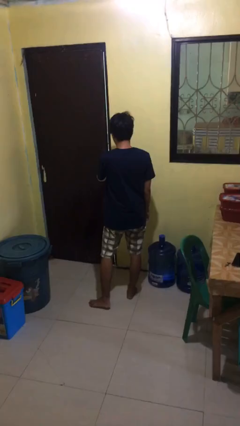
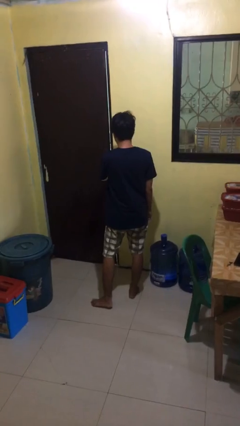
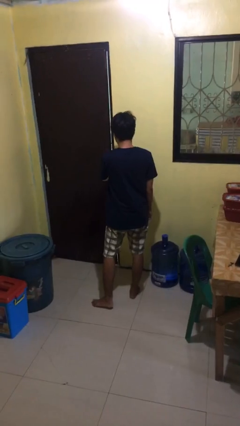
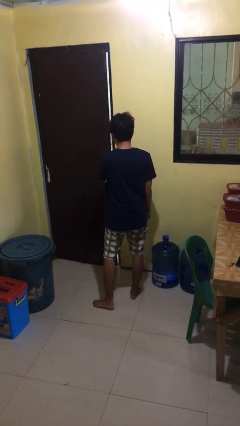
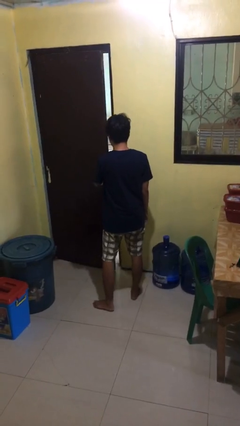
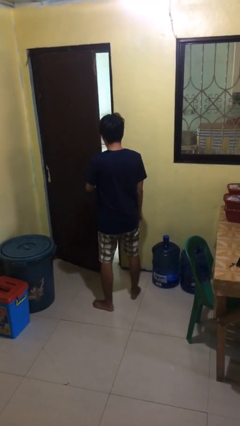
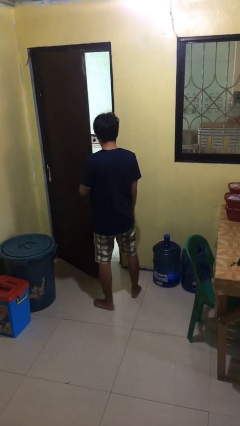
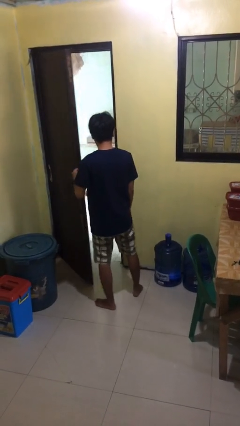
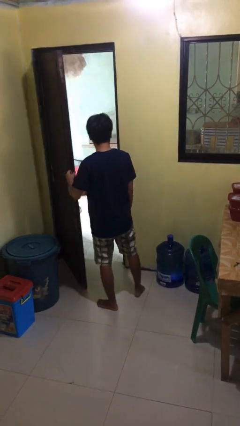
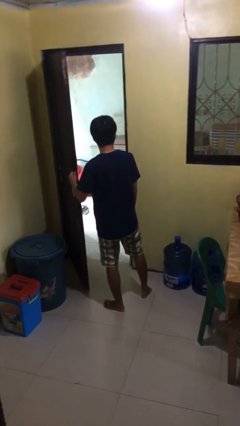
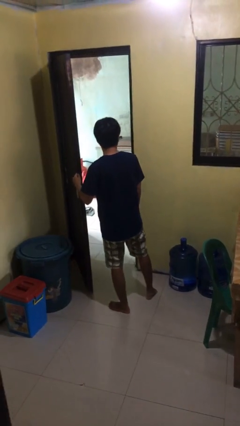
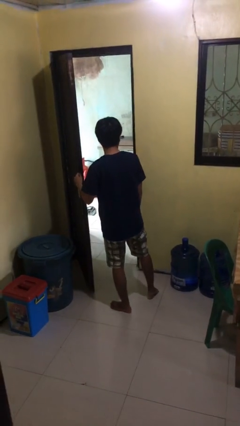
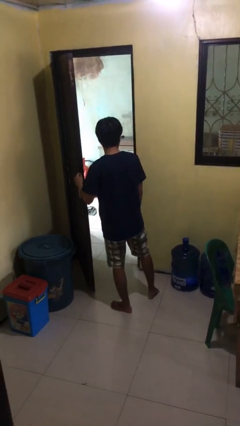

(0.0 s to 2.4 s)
person opens facility door

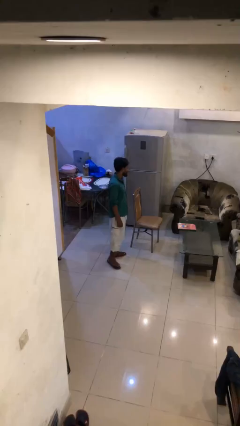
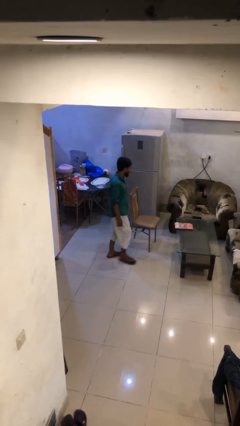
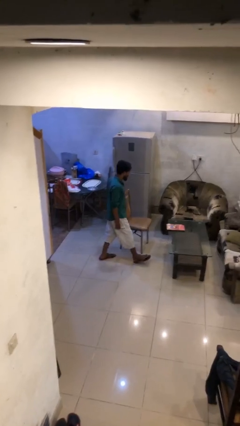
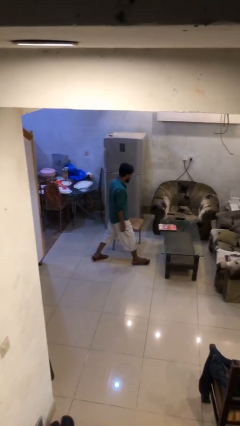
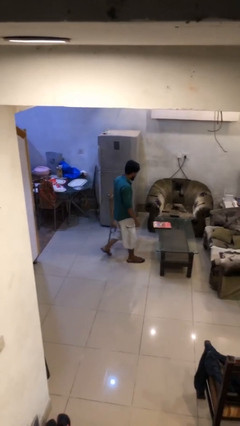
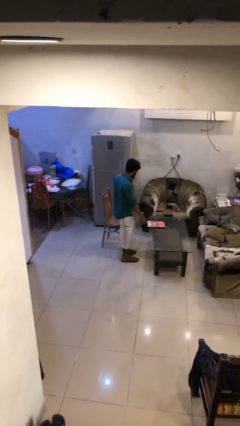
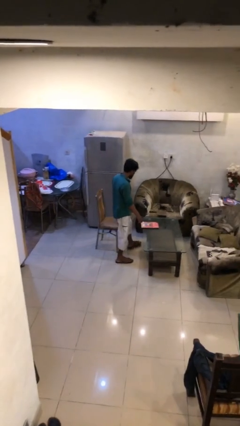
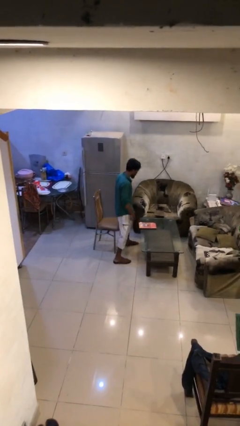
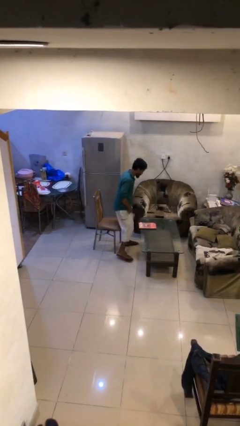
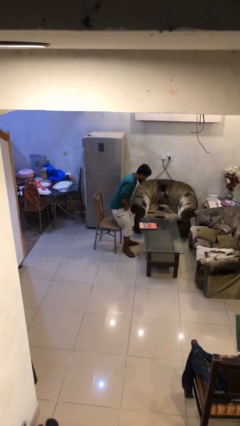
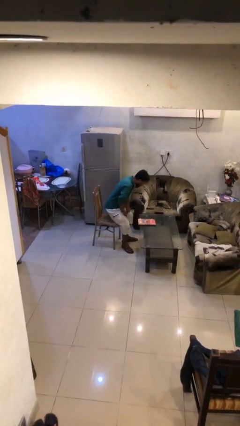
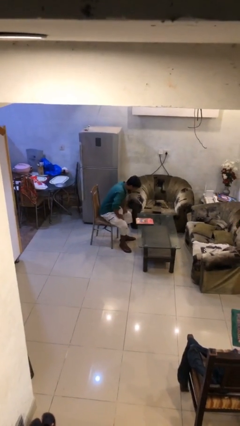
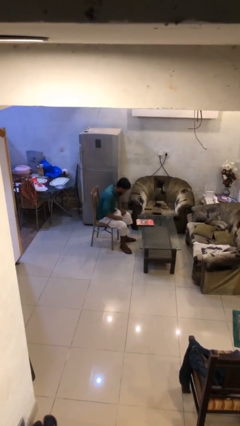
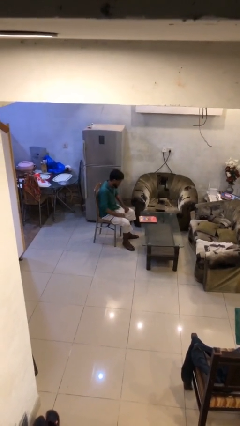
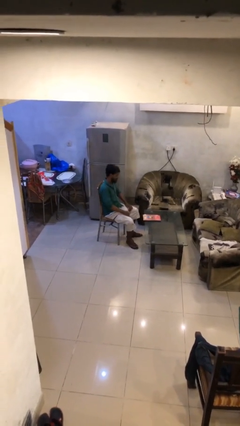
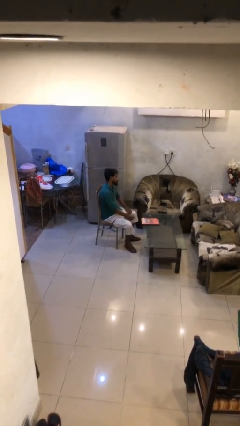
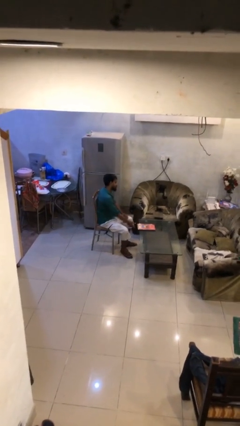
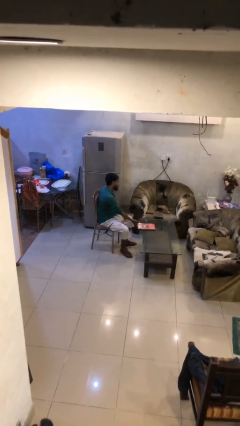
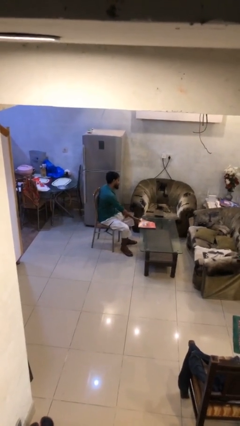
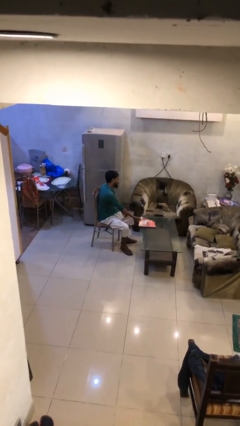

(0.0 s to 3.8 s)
person sits down

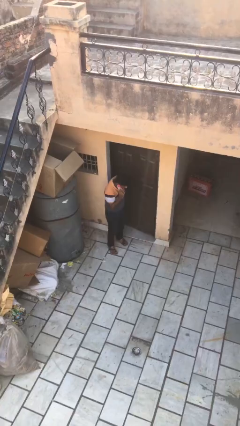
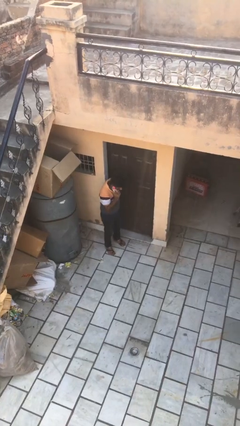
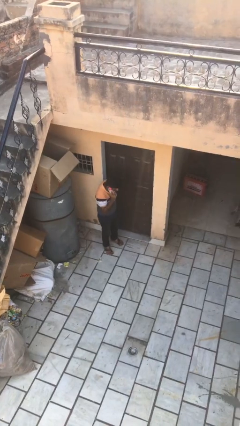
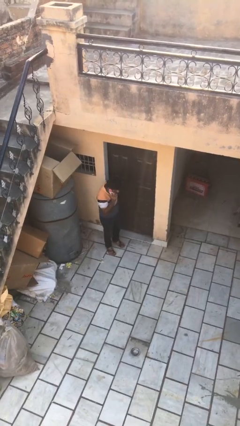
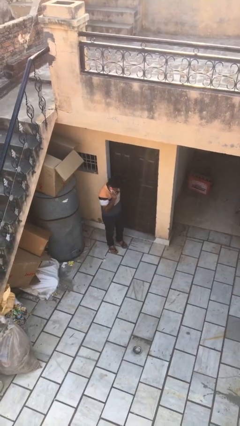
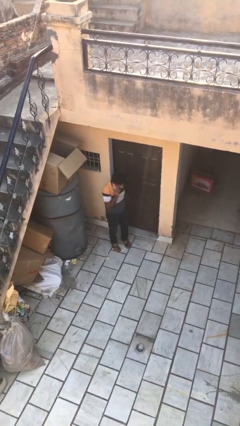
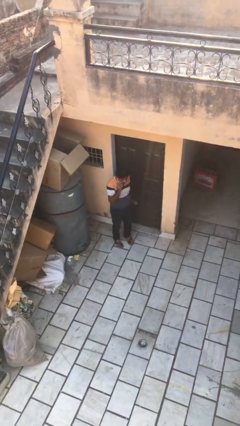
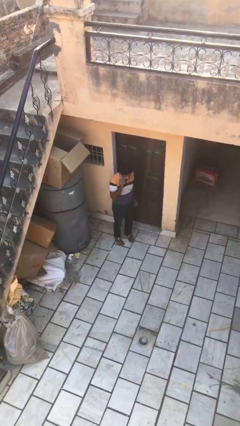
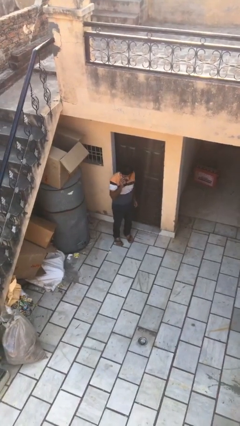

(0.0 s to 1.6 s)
person closes facility door

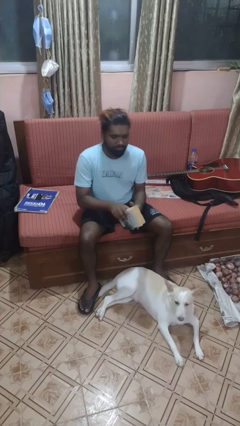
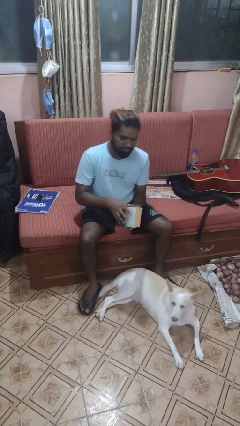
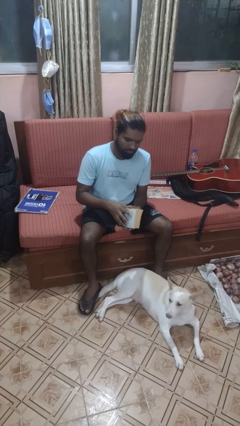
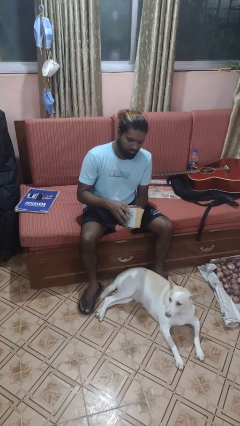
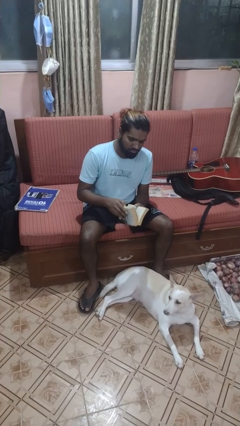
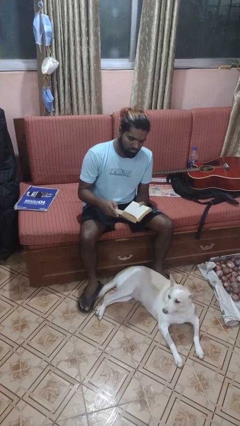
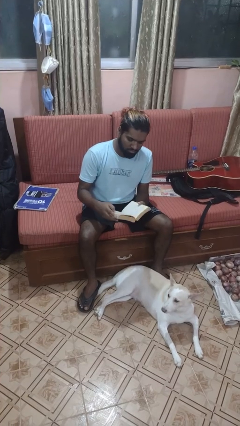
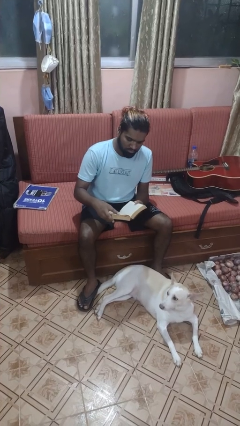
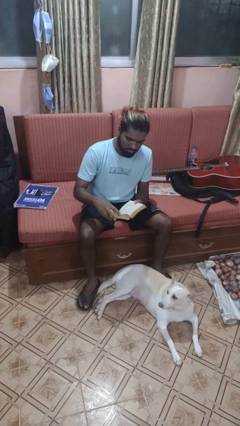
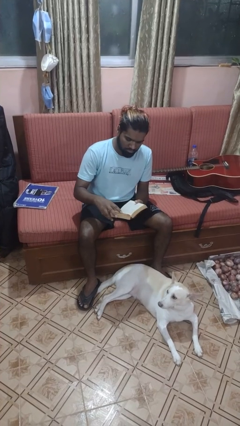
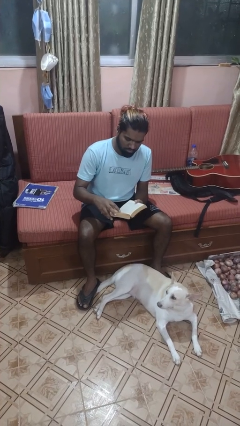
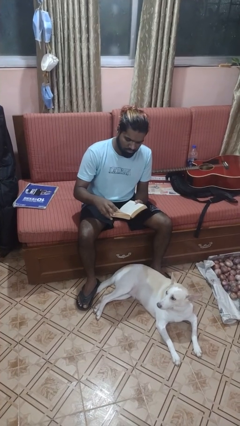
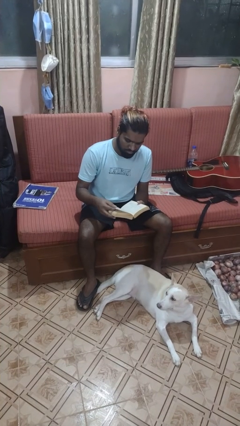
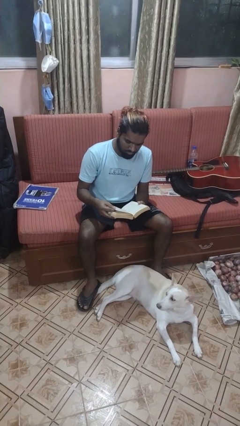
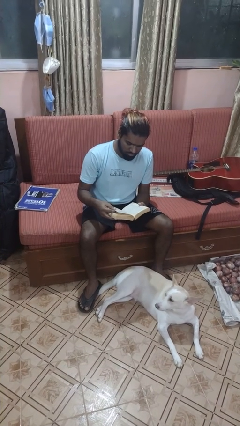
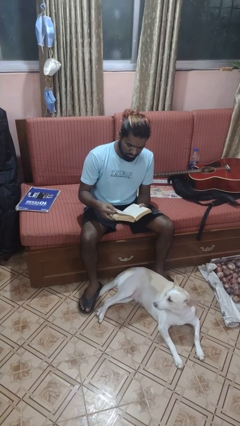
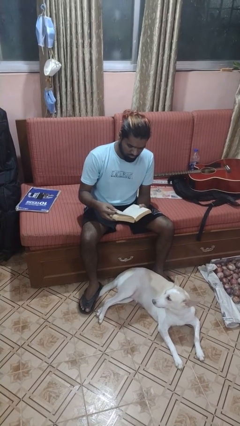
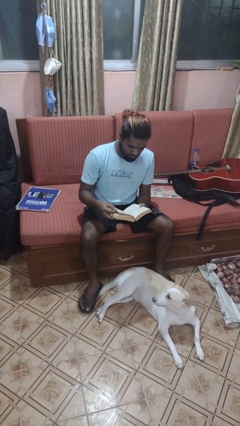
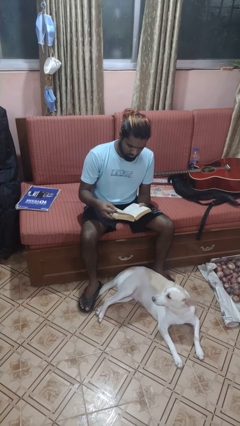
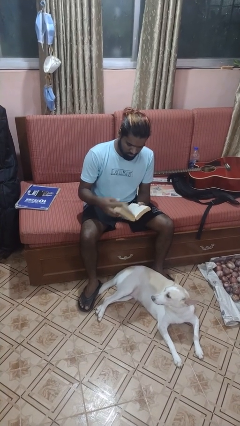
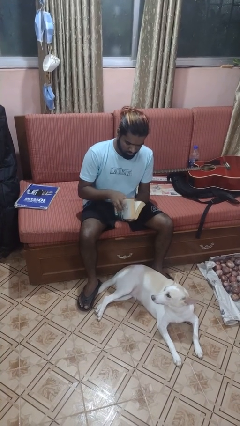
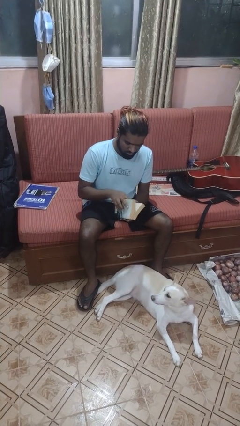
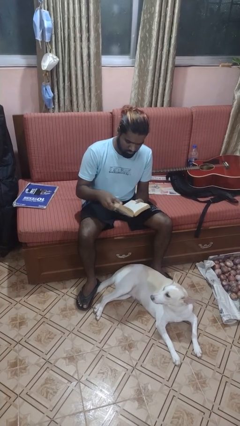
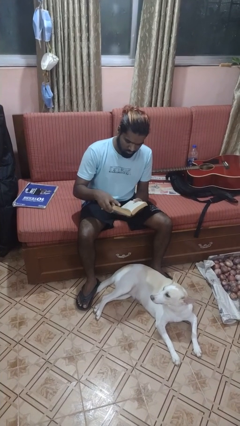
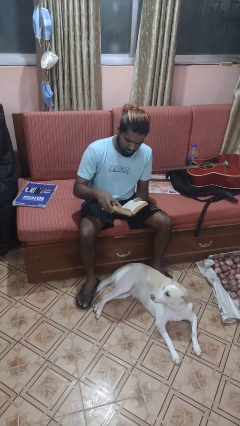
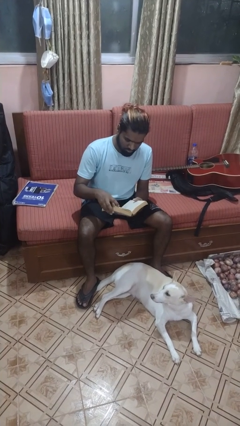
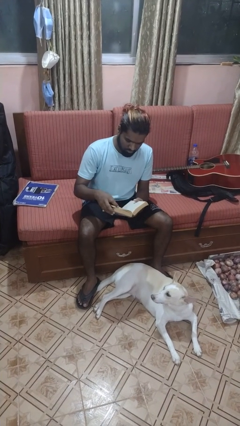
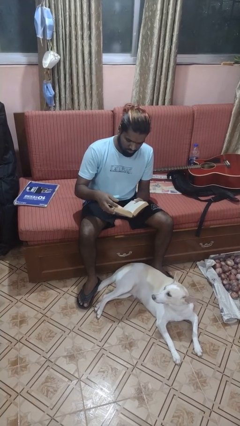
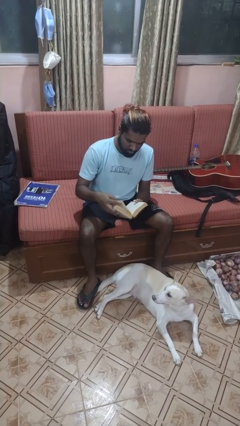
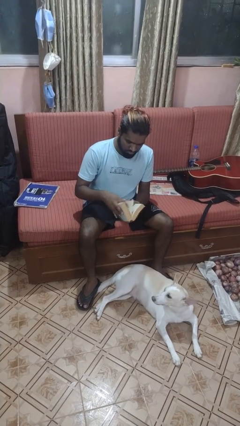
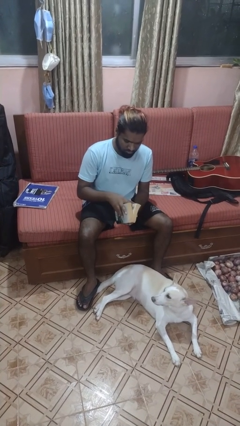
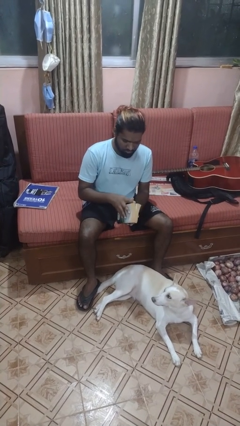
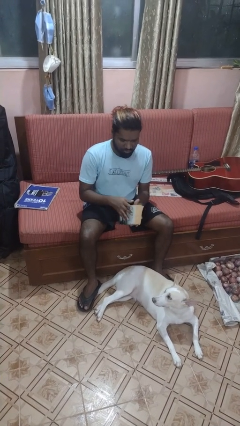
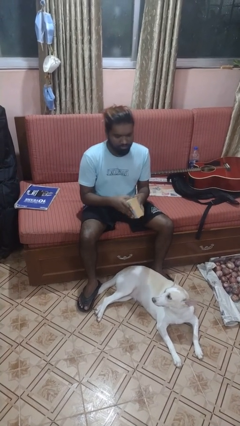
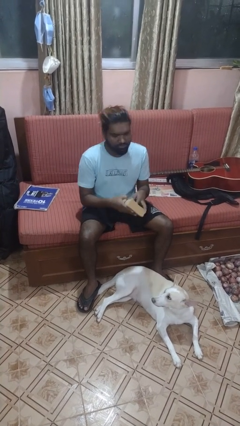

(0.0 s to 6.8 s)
person reads book

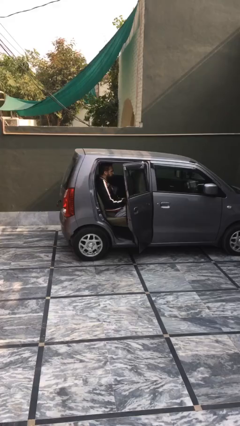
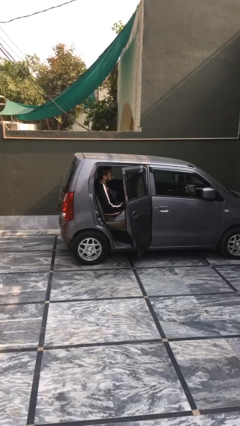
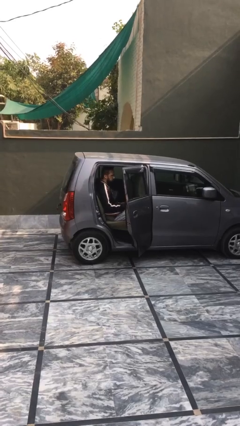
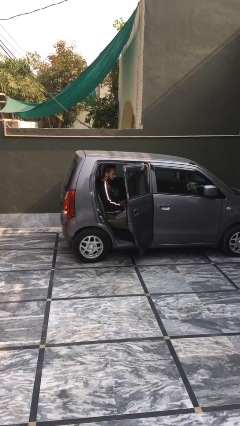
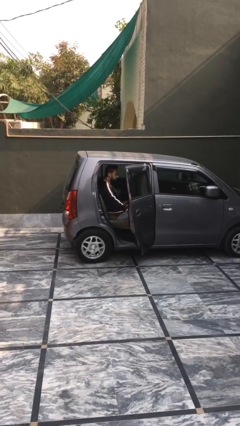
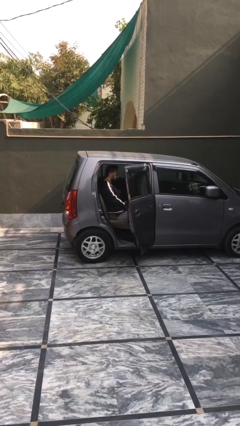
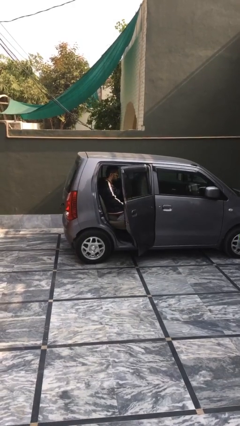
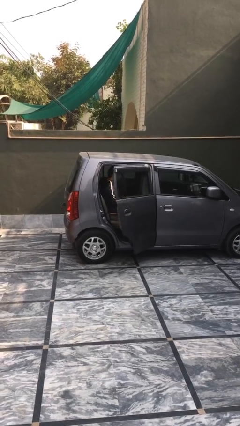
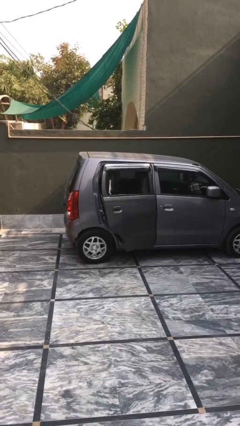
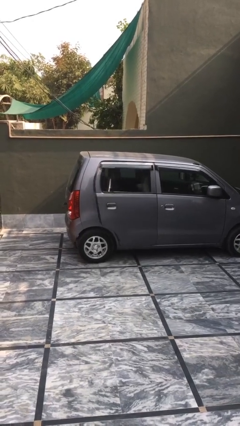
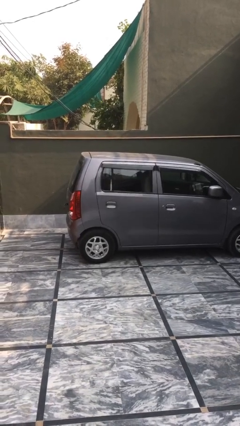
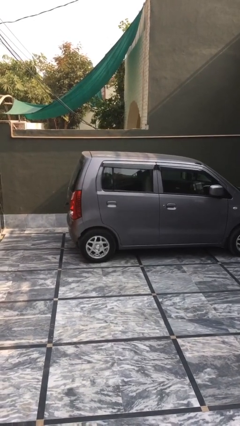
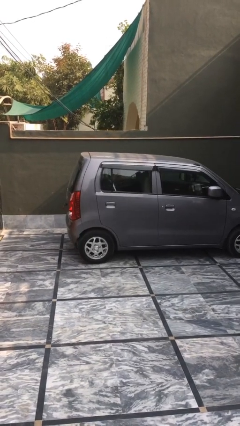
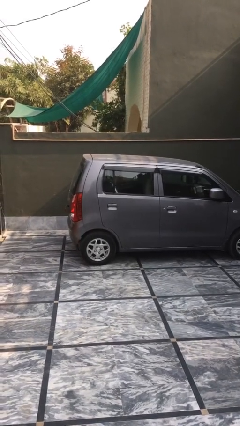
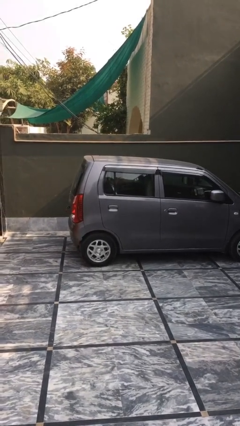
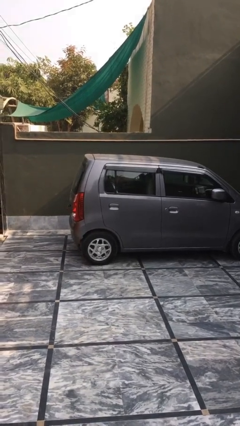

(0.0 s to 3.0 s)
person closes car door
